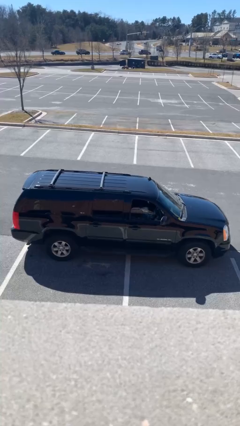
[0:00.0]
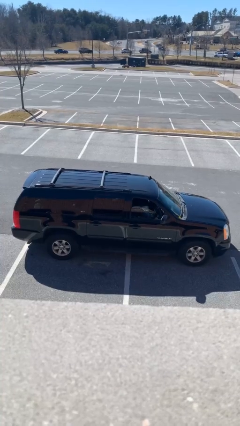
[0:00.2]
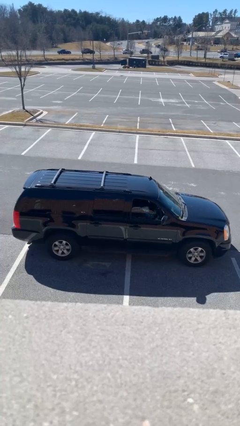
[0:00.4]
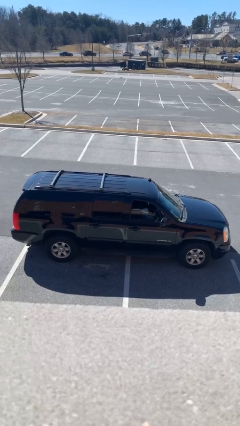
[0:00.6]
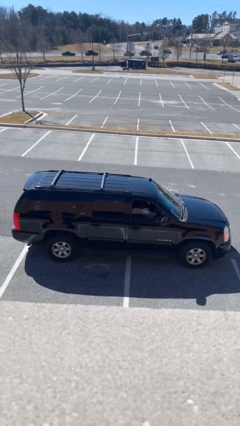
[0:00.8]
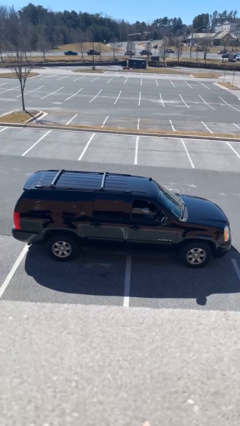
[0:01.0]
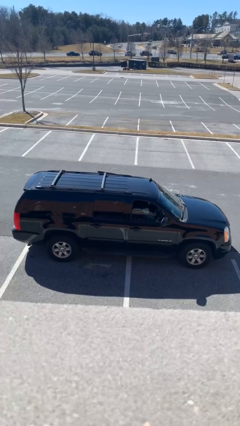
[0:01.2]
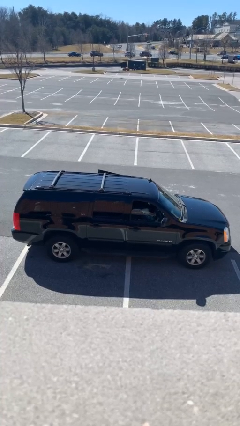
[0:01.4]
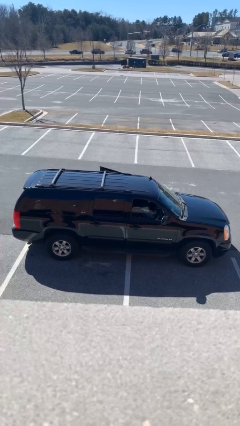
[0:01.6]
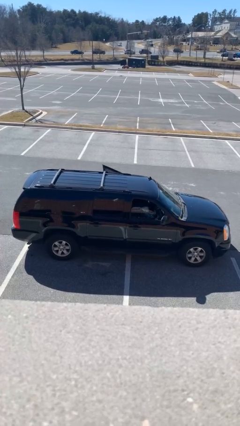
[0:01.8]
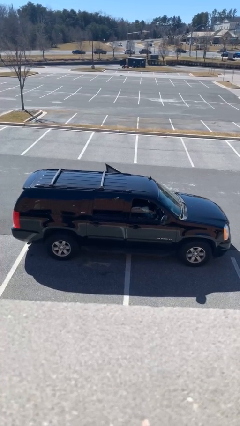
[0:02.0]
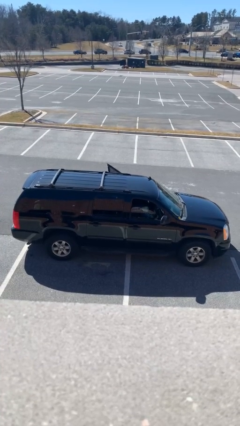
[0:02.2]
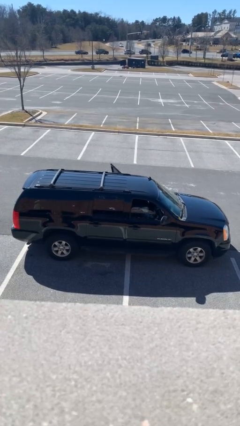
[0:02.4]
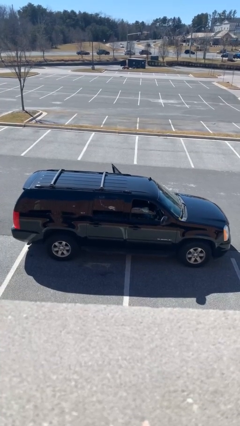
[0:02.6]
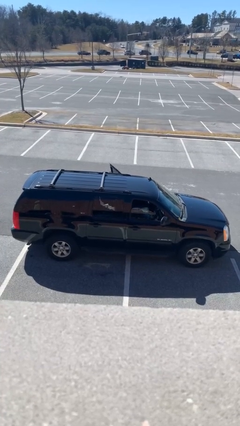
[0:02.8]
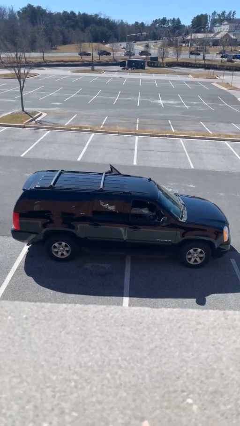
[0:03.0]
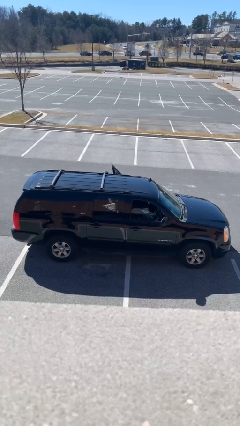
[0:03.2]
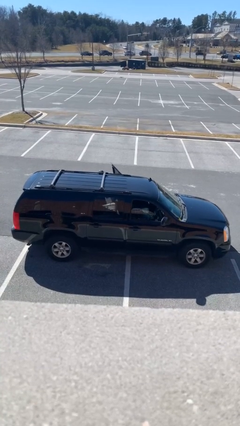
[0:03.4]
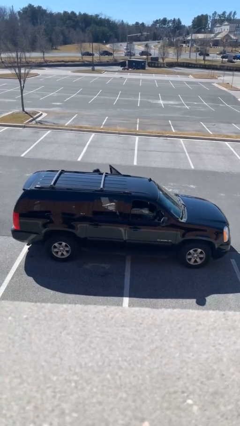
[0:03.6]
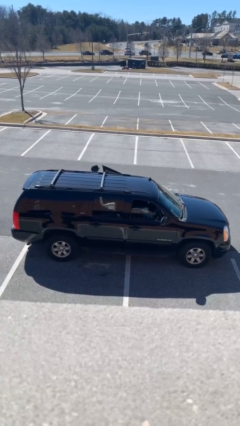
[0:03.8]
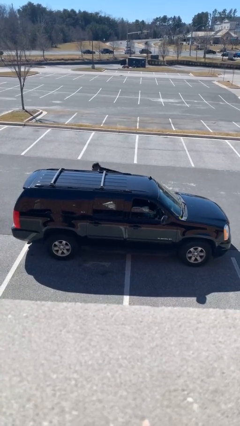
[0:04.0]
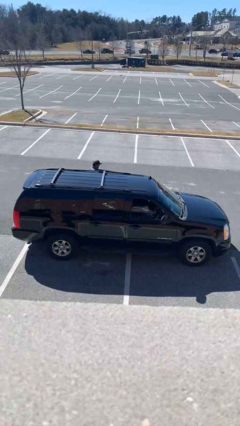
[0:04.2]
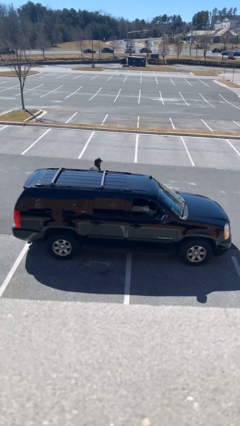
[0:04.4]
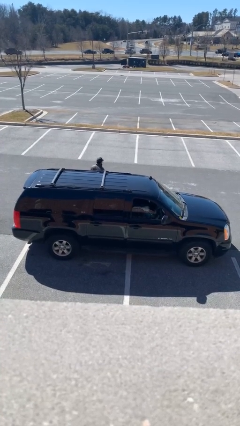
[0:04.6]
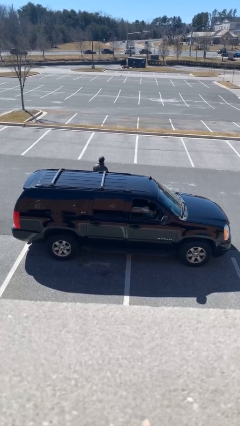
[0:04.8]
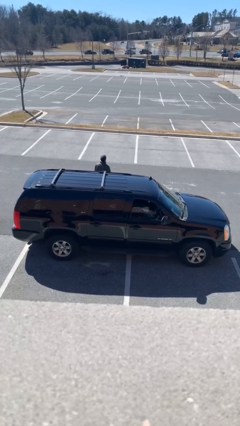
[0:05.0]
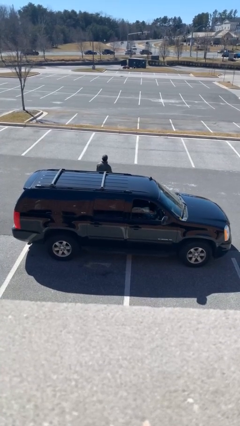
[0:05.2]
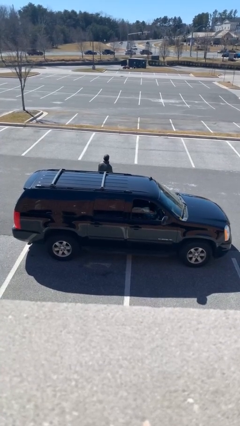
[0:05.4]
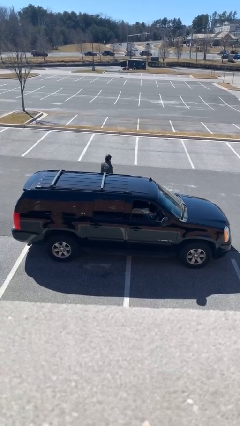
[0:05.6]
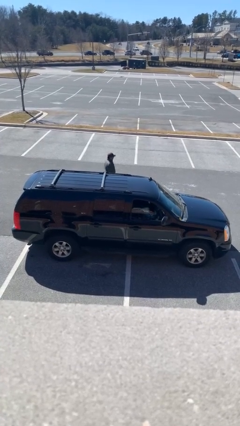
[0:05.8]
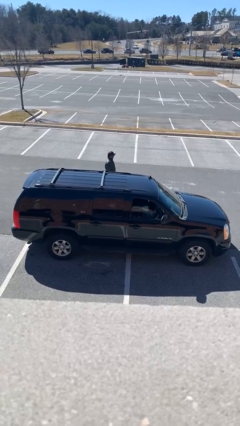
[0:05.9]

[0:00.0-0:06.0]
car drops off person

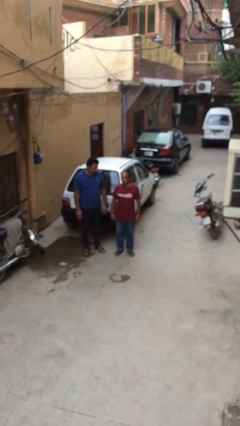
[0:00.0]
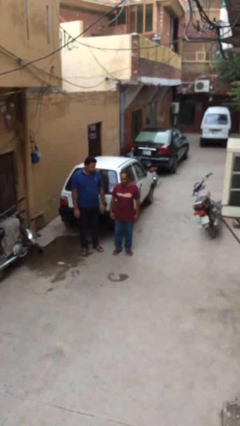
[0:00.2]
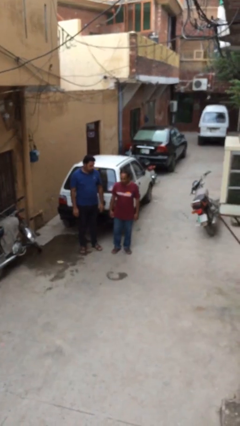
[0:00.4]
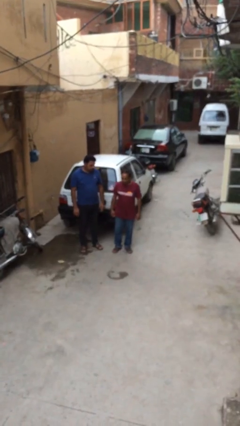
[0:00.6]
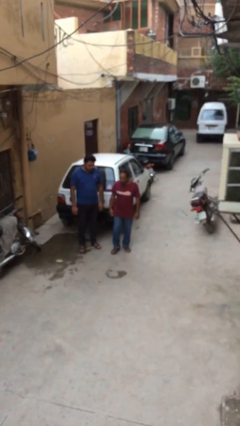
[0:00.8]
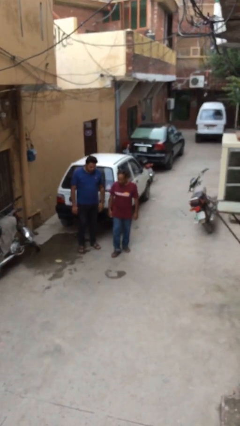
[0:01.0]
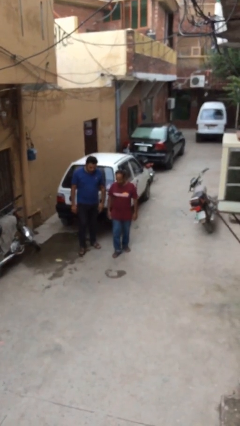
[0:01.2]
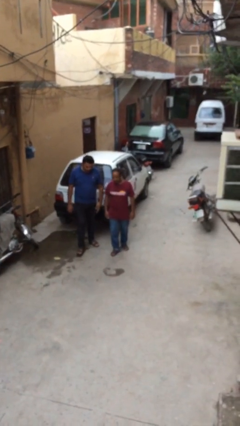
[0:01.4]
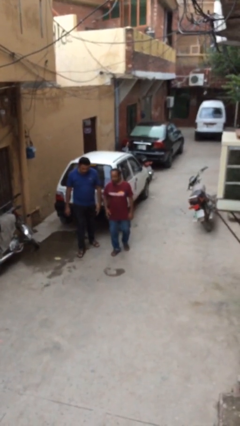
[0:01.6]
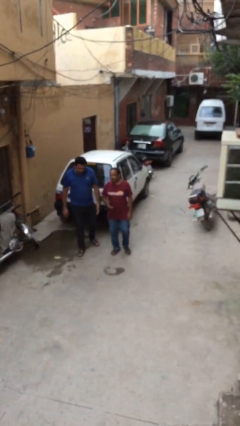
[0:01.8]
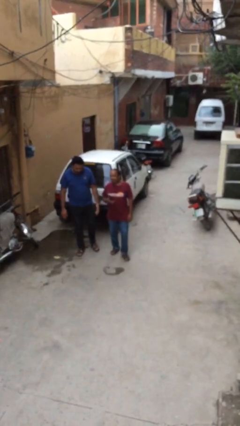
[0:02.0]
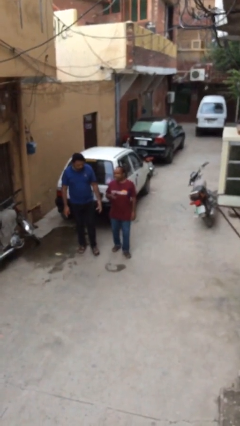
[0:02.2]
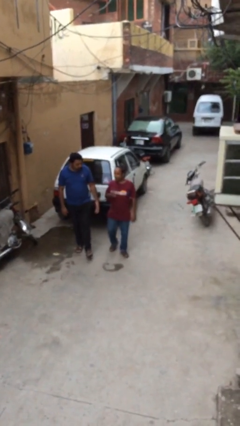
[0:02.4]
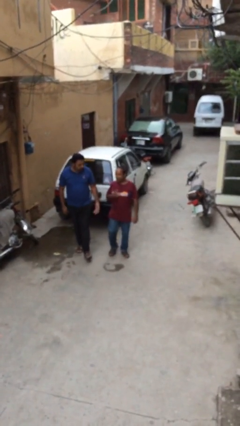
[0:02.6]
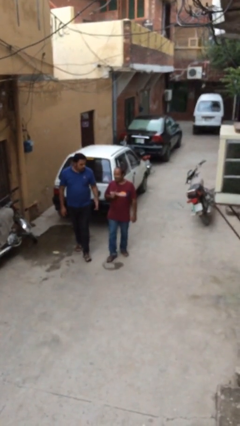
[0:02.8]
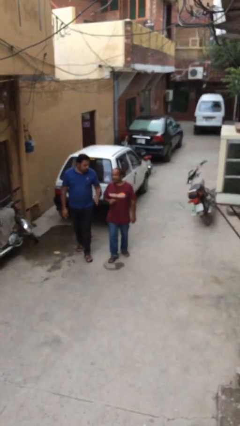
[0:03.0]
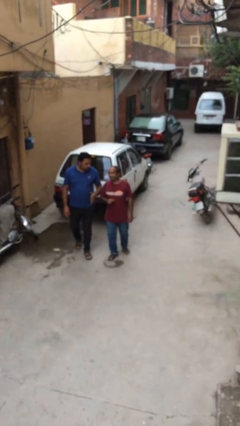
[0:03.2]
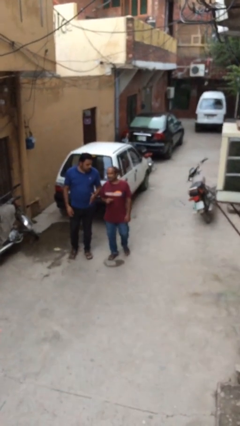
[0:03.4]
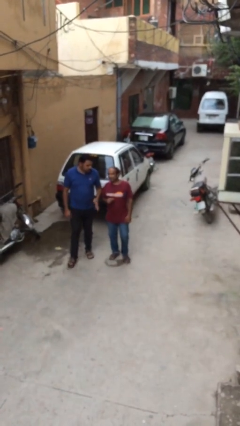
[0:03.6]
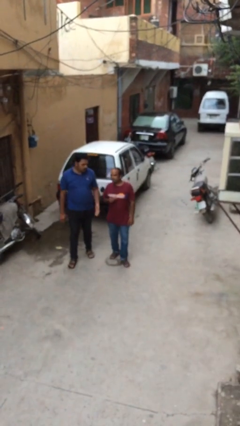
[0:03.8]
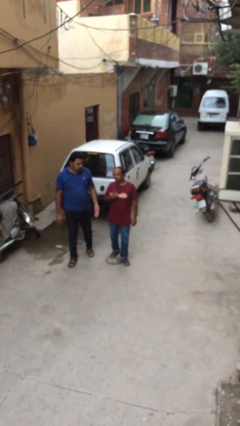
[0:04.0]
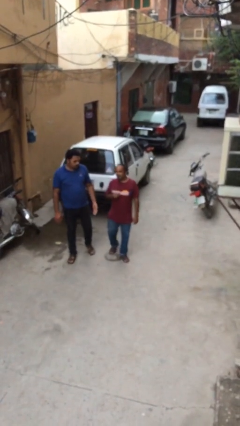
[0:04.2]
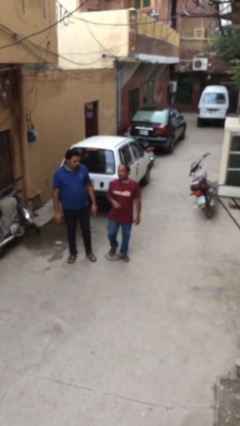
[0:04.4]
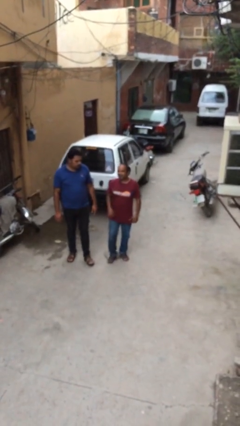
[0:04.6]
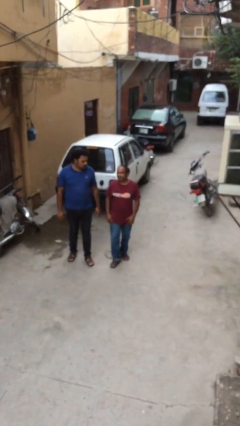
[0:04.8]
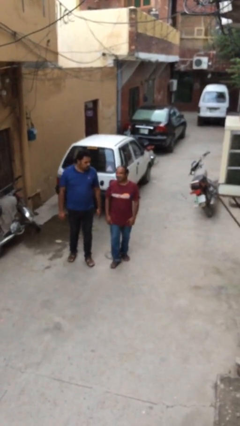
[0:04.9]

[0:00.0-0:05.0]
person talks to person

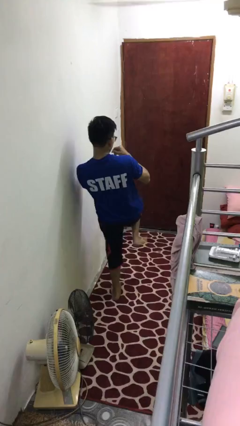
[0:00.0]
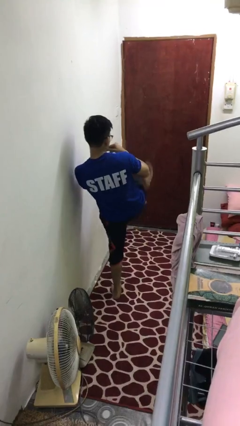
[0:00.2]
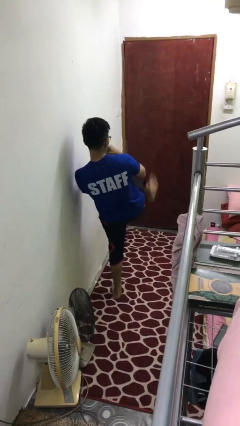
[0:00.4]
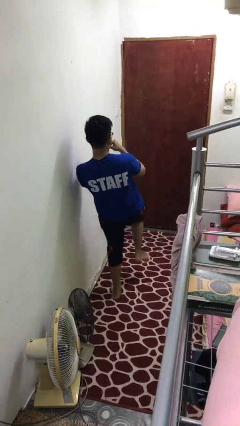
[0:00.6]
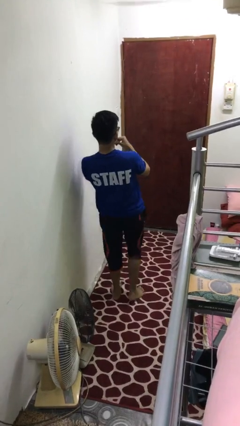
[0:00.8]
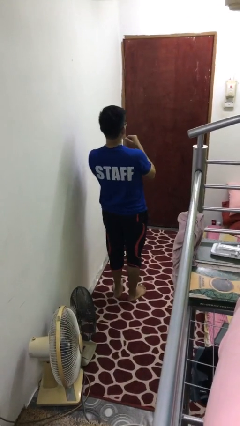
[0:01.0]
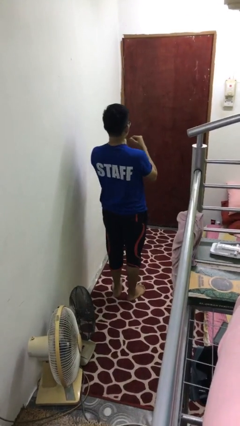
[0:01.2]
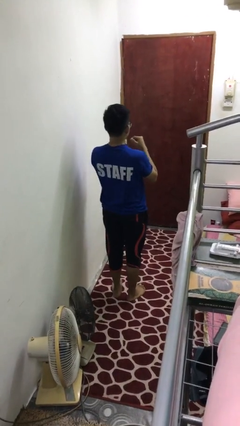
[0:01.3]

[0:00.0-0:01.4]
person karate kicks

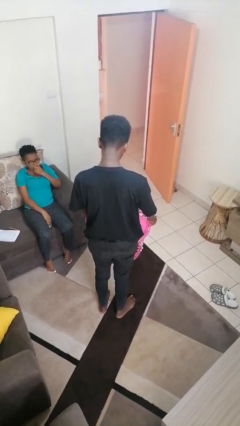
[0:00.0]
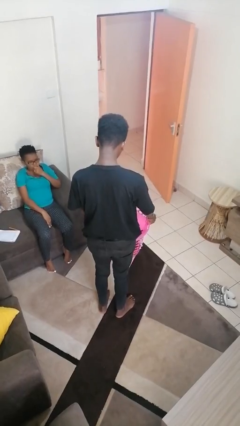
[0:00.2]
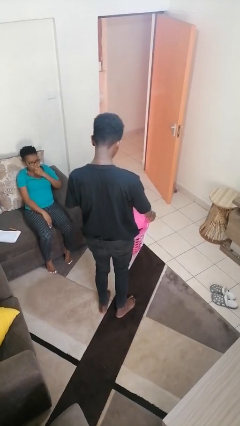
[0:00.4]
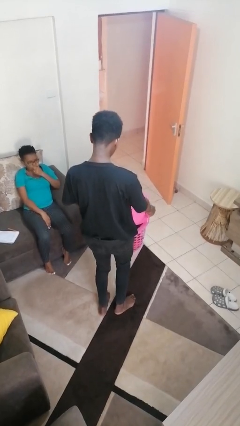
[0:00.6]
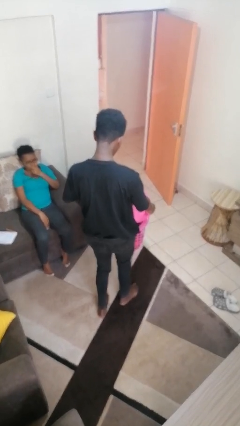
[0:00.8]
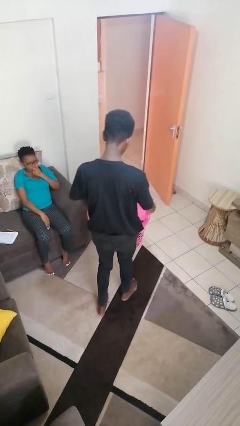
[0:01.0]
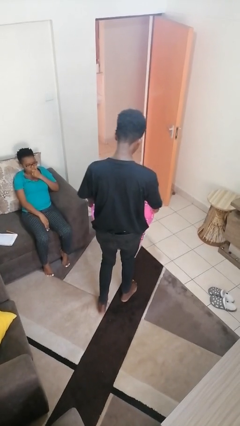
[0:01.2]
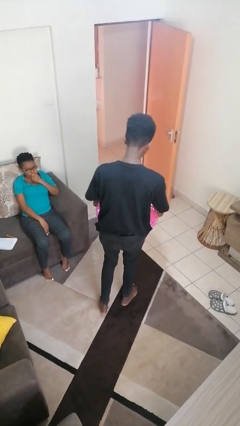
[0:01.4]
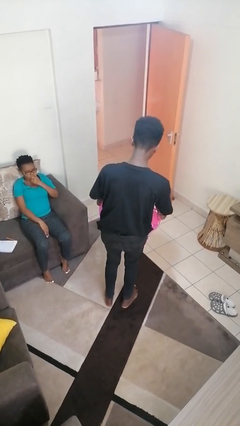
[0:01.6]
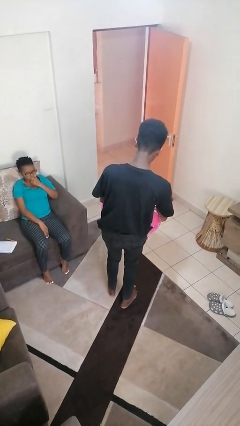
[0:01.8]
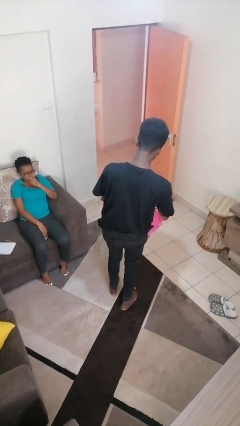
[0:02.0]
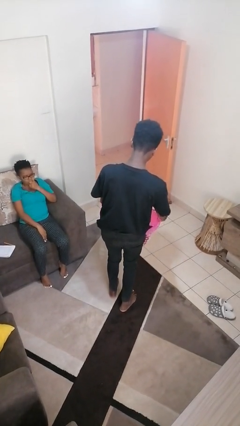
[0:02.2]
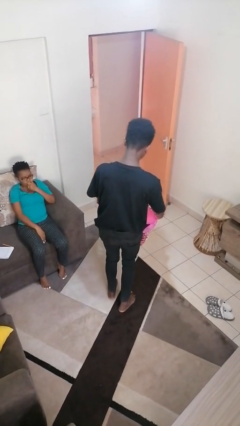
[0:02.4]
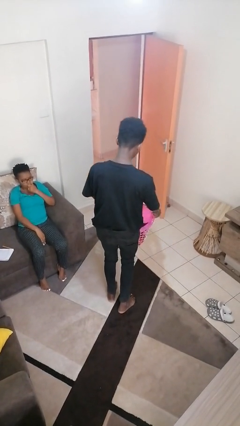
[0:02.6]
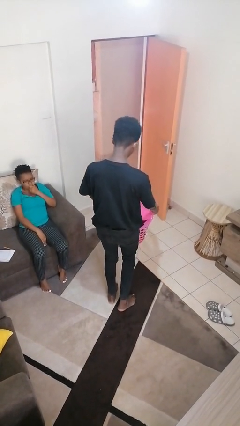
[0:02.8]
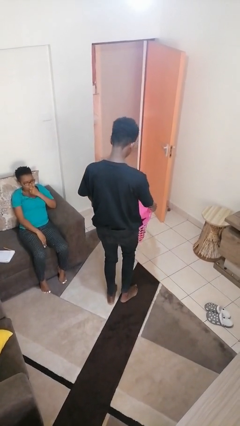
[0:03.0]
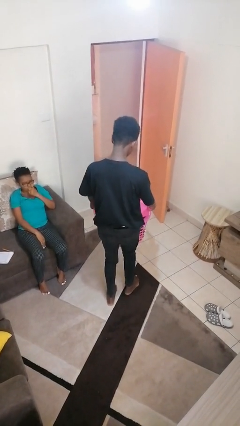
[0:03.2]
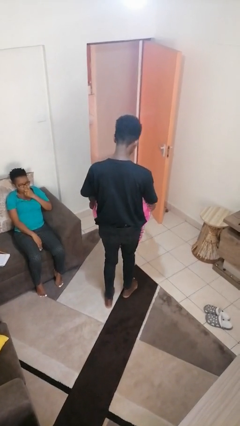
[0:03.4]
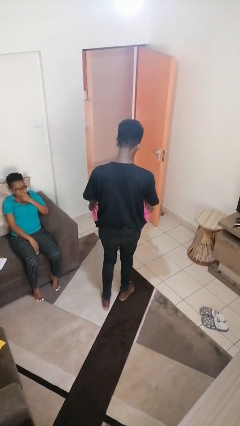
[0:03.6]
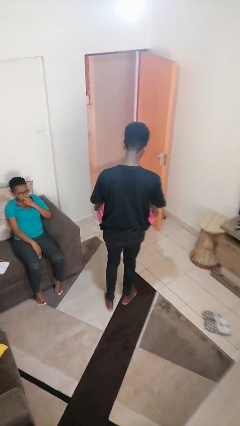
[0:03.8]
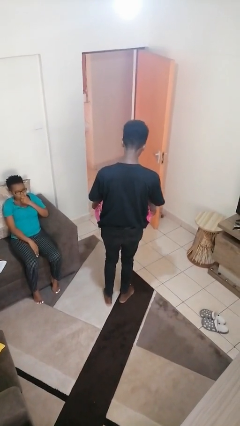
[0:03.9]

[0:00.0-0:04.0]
person carries laundry basket

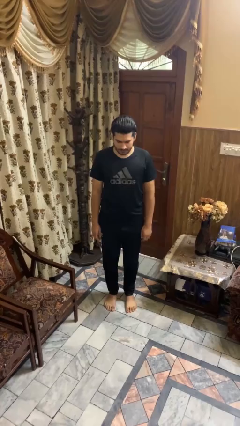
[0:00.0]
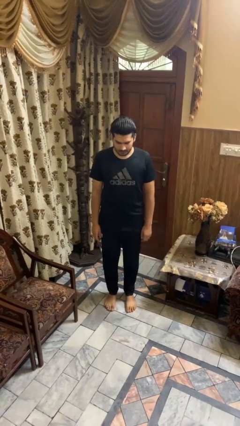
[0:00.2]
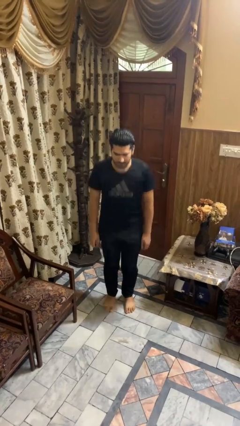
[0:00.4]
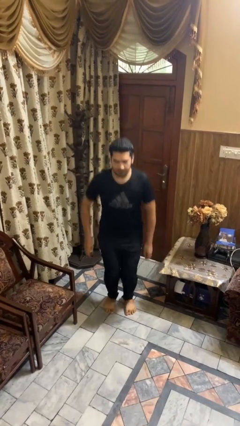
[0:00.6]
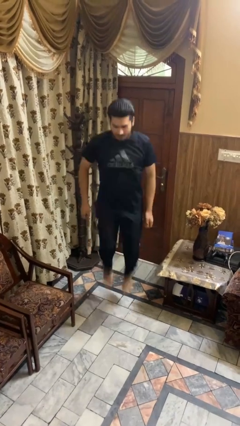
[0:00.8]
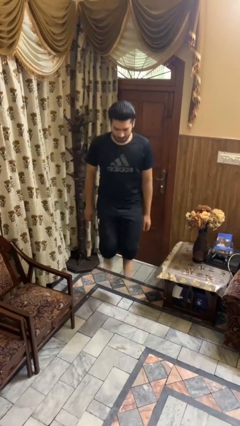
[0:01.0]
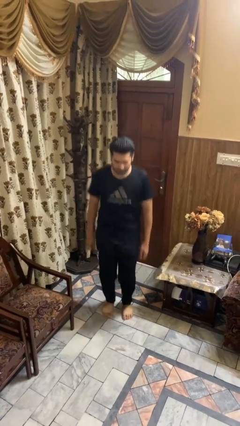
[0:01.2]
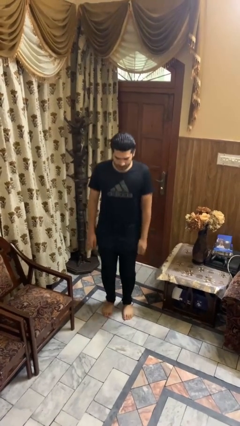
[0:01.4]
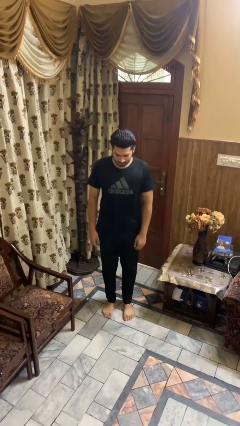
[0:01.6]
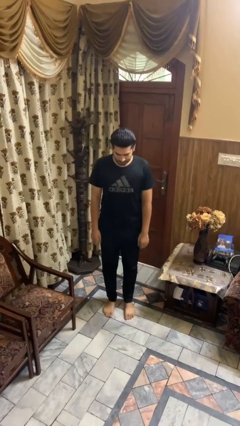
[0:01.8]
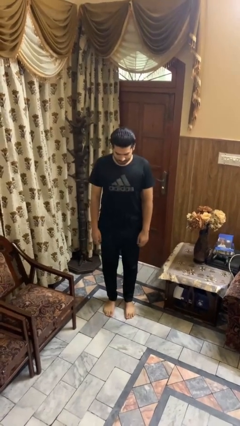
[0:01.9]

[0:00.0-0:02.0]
person jumps
